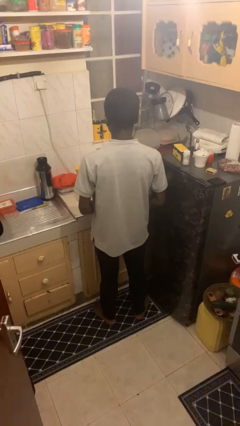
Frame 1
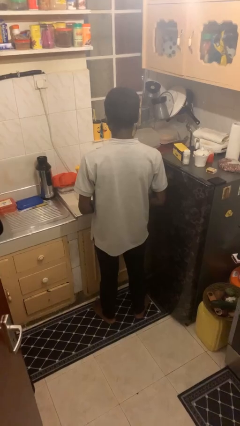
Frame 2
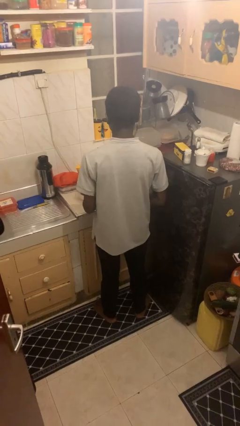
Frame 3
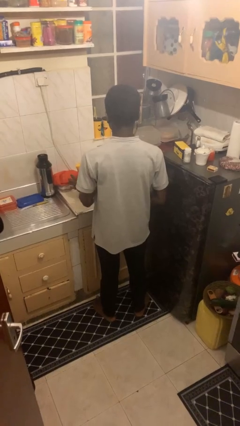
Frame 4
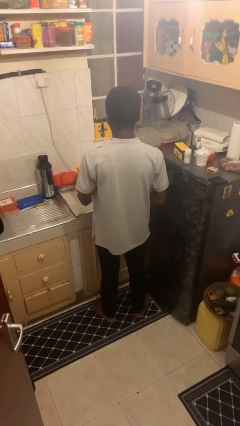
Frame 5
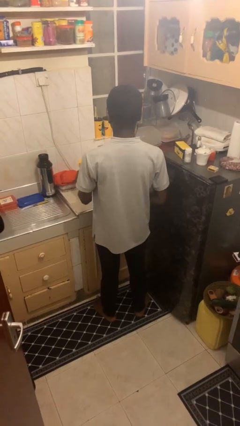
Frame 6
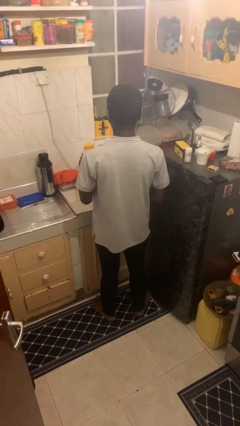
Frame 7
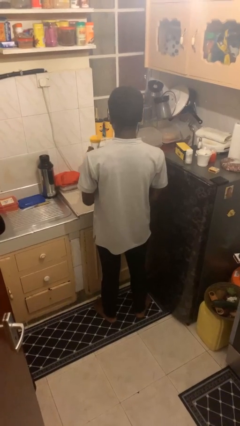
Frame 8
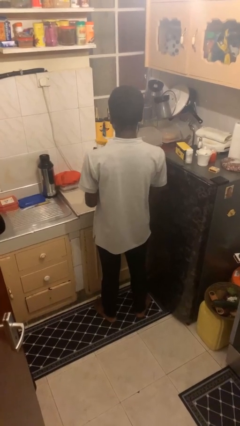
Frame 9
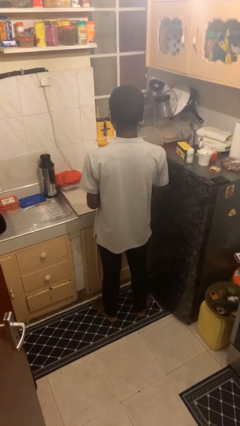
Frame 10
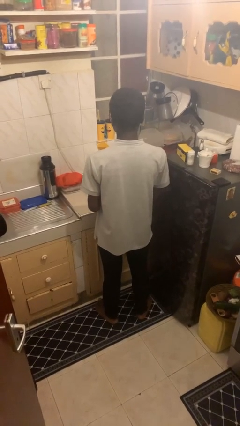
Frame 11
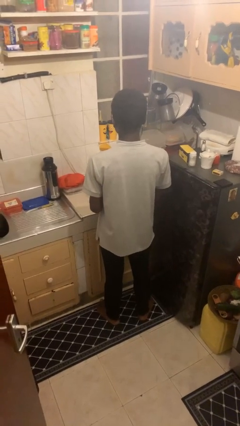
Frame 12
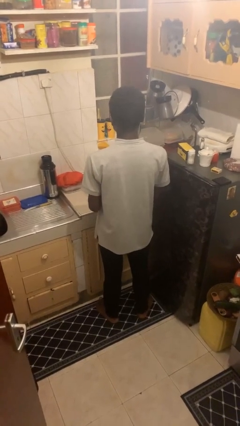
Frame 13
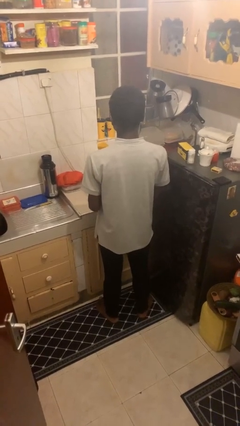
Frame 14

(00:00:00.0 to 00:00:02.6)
person picks up object from countertop

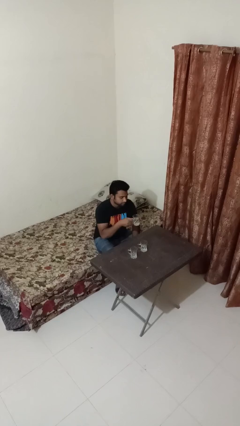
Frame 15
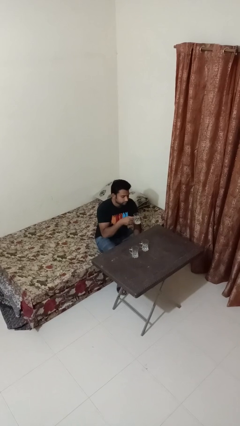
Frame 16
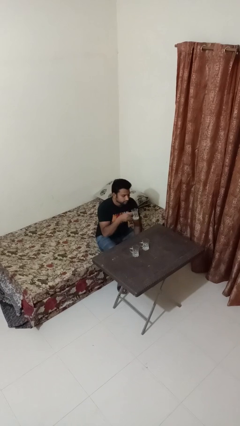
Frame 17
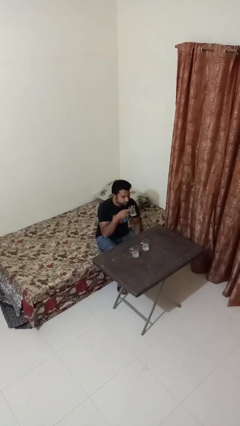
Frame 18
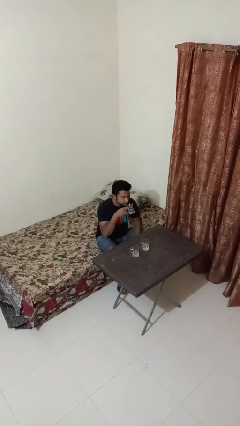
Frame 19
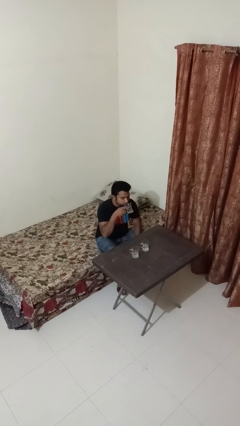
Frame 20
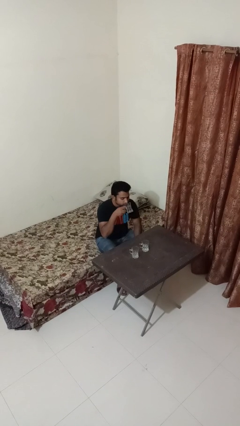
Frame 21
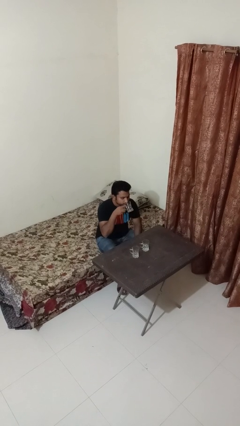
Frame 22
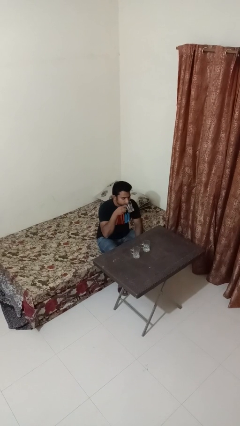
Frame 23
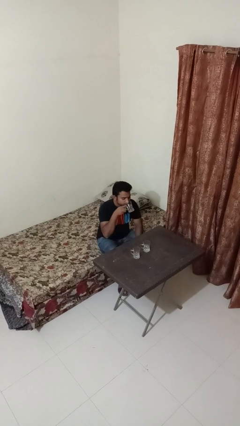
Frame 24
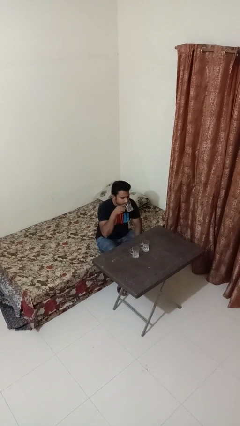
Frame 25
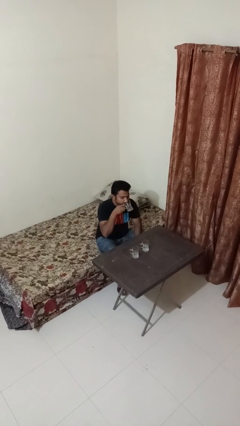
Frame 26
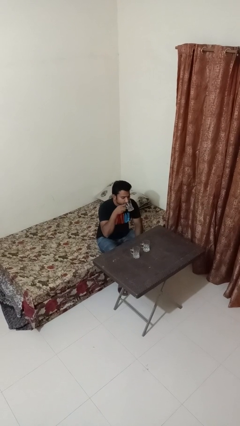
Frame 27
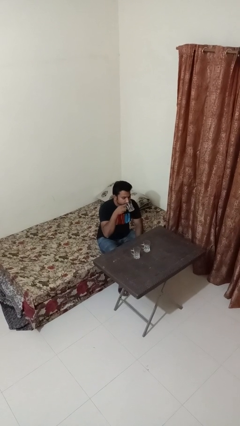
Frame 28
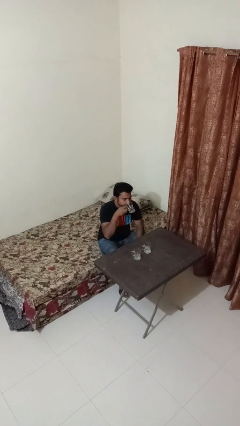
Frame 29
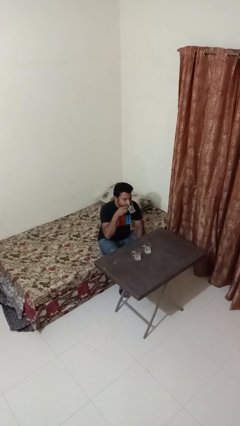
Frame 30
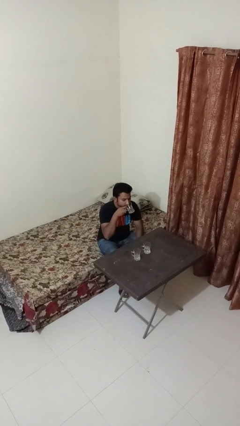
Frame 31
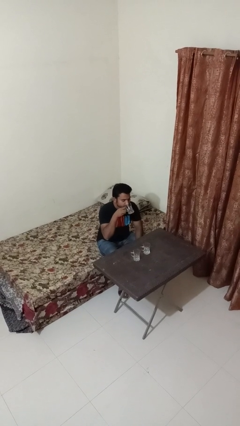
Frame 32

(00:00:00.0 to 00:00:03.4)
person drinks from shotglass

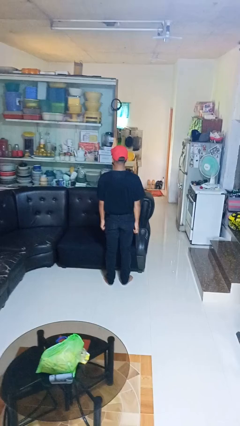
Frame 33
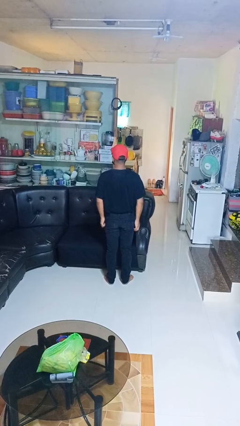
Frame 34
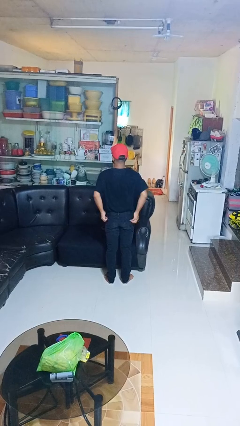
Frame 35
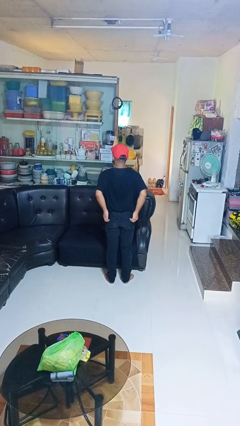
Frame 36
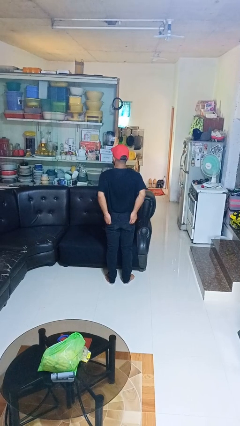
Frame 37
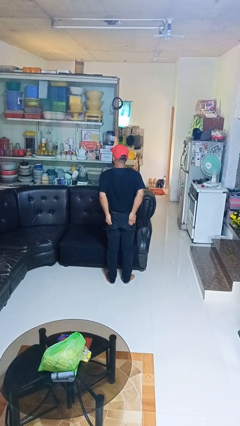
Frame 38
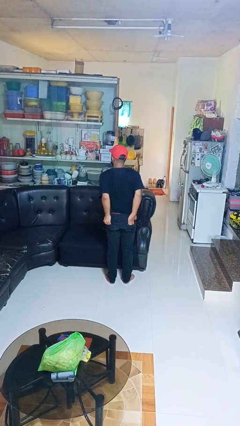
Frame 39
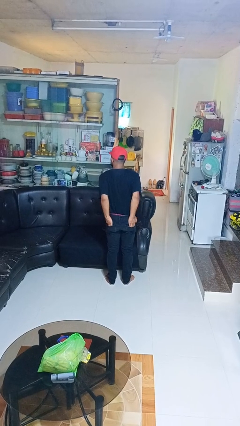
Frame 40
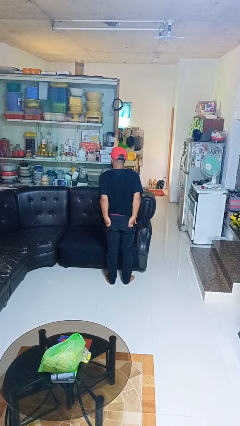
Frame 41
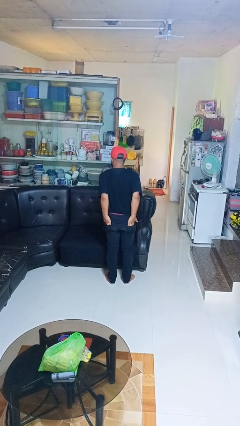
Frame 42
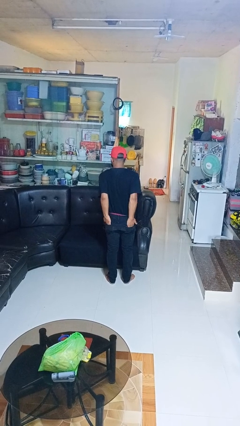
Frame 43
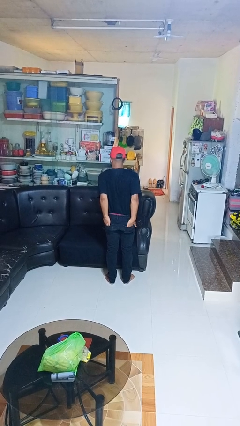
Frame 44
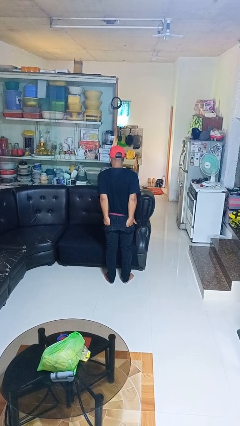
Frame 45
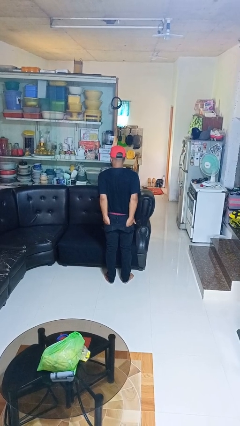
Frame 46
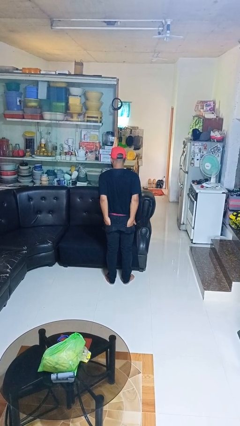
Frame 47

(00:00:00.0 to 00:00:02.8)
person puts hands in back pockets

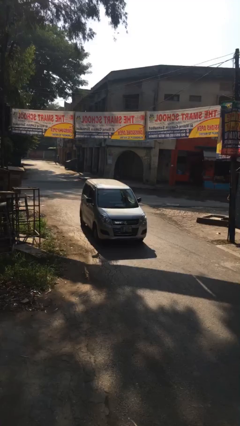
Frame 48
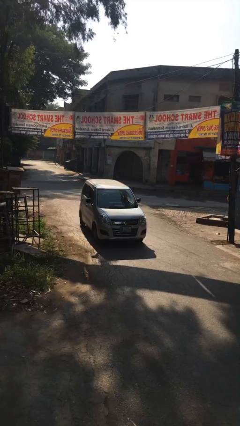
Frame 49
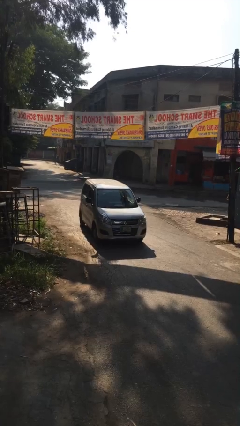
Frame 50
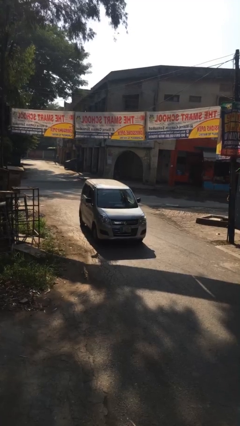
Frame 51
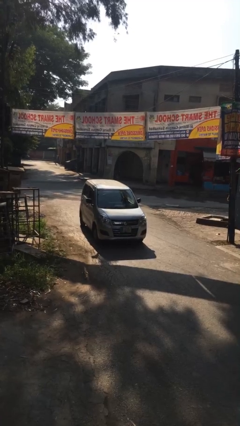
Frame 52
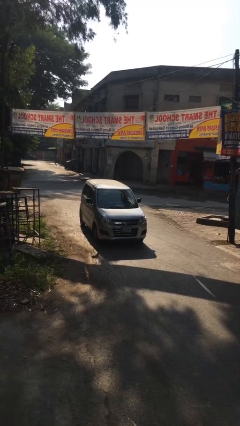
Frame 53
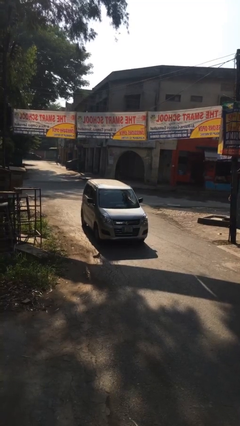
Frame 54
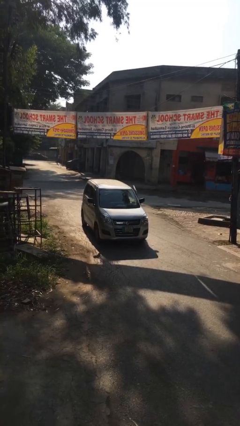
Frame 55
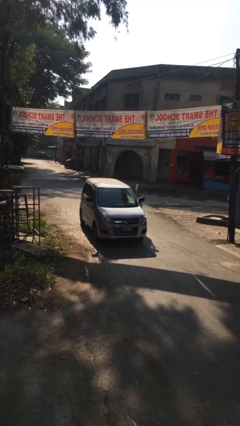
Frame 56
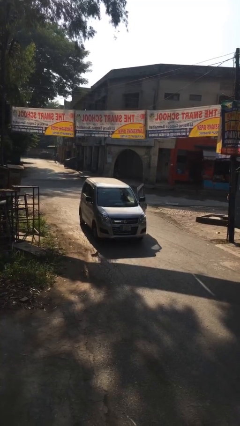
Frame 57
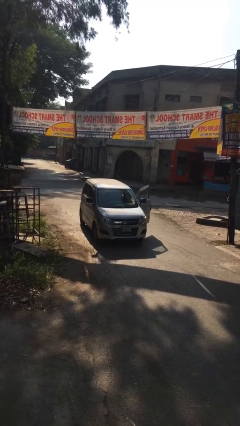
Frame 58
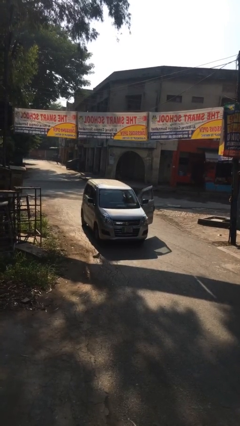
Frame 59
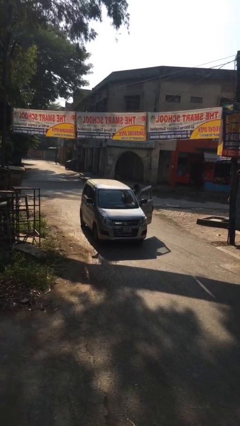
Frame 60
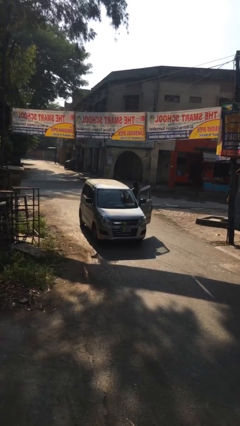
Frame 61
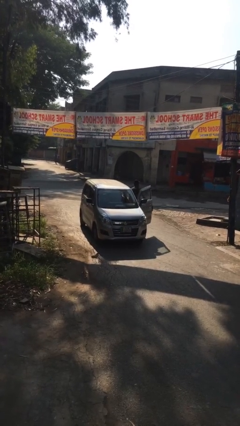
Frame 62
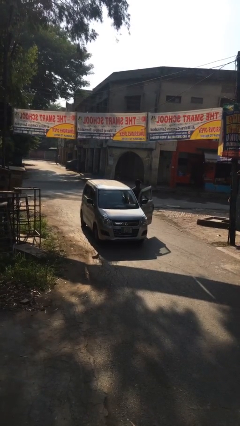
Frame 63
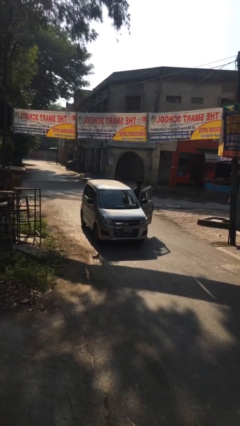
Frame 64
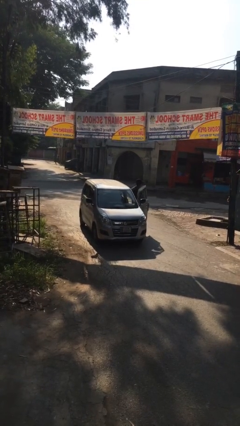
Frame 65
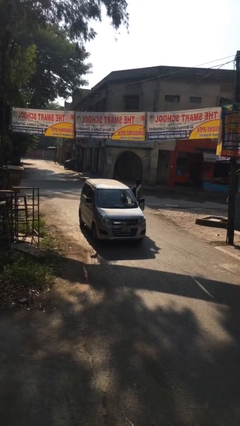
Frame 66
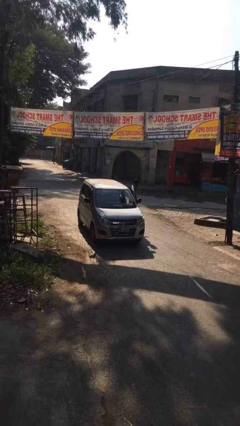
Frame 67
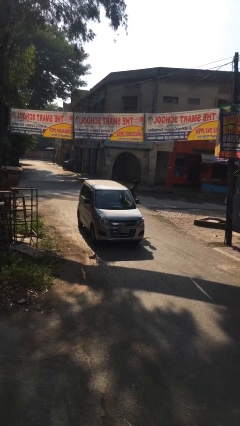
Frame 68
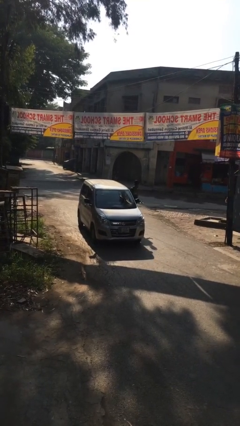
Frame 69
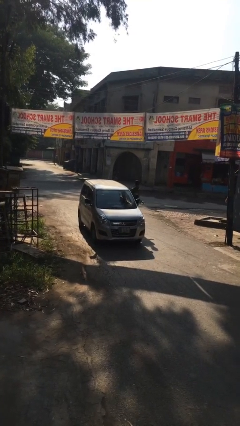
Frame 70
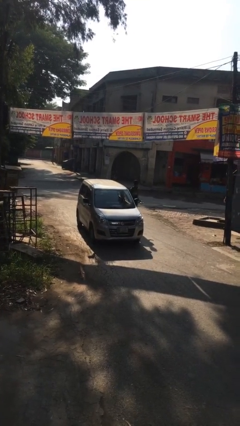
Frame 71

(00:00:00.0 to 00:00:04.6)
car drops off person

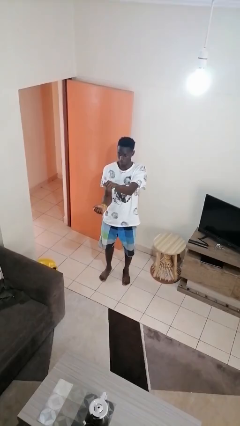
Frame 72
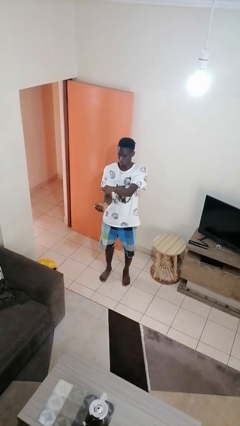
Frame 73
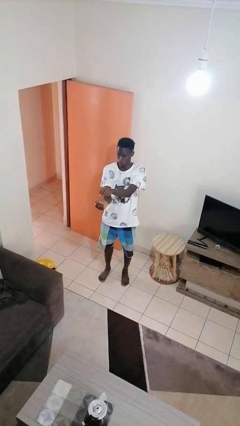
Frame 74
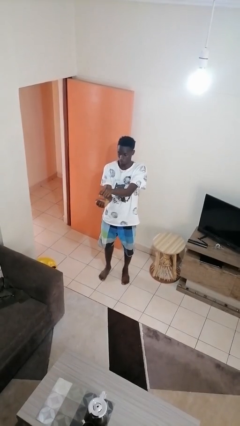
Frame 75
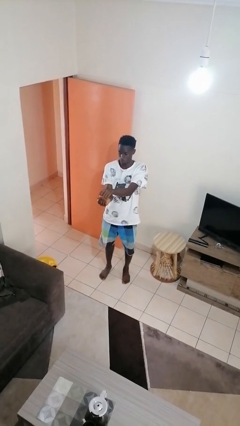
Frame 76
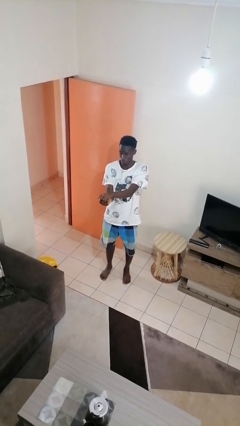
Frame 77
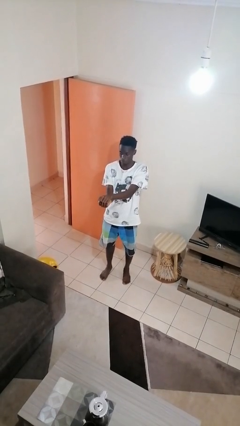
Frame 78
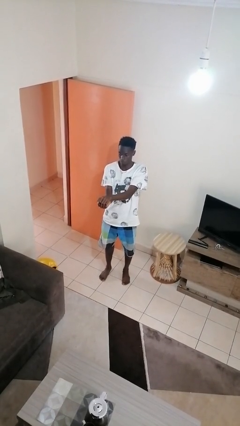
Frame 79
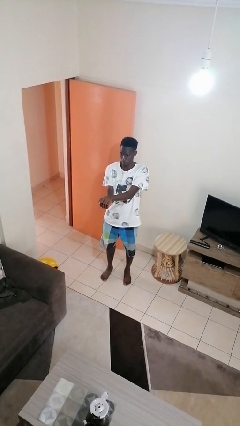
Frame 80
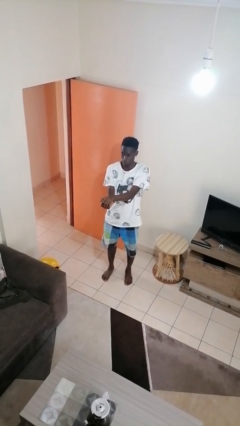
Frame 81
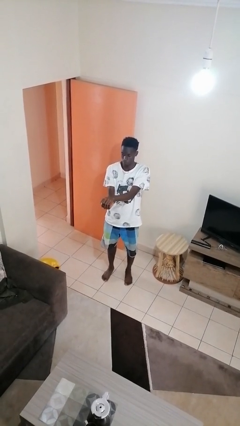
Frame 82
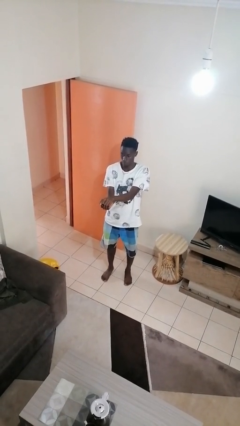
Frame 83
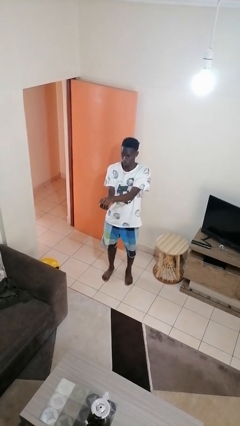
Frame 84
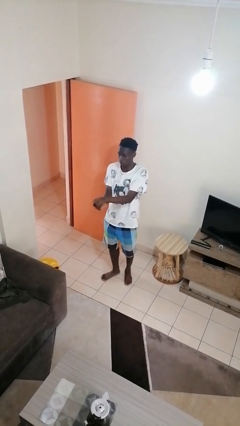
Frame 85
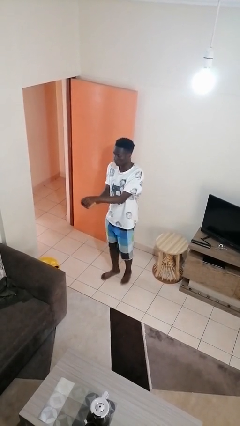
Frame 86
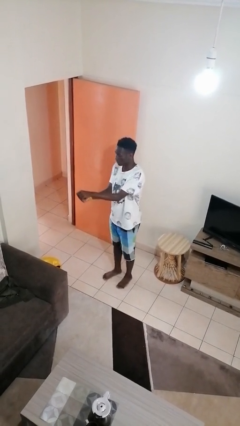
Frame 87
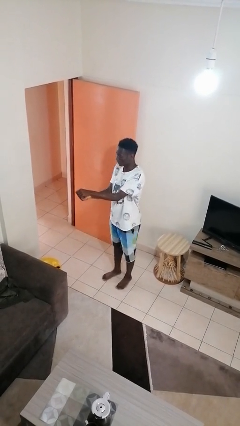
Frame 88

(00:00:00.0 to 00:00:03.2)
person gestures zoom out

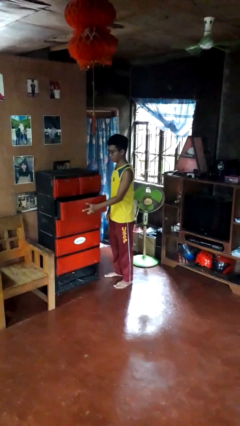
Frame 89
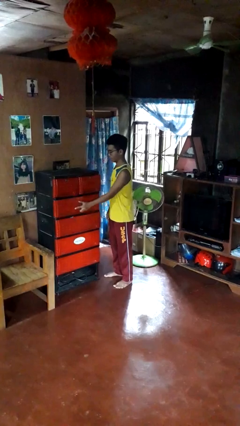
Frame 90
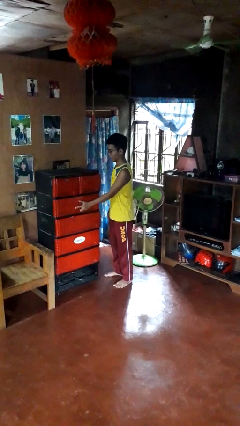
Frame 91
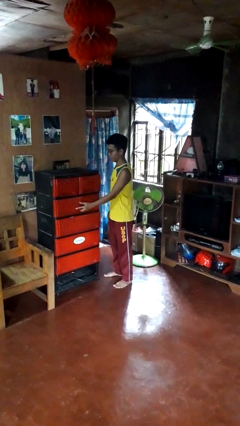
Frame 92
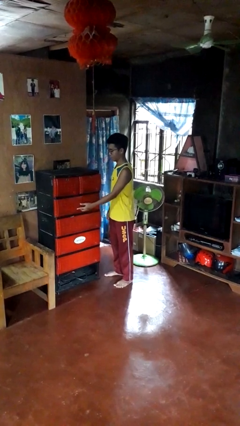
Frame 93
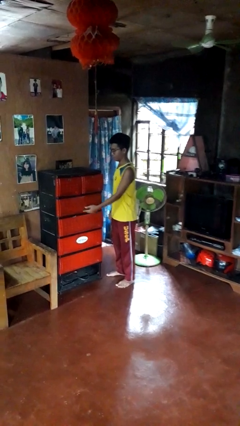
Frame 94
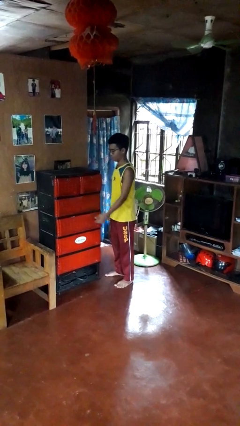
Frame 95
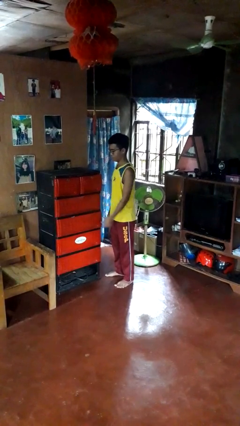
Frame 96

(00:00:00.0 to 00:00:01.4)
person closes dresser drawer
